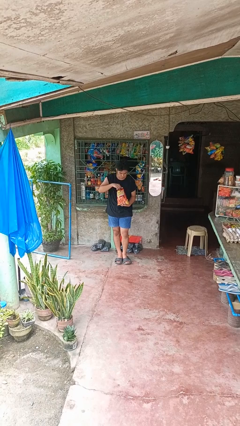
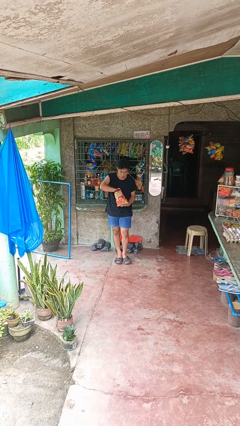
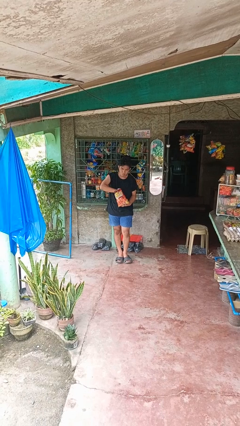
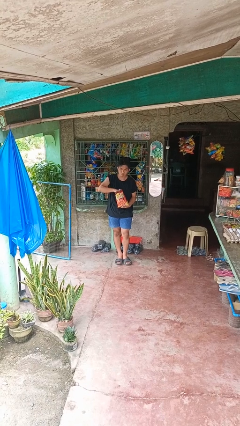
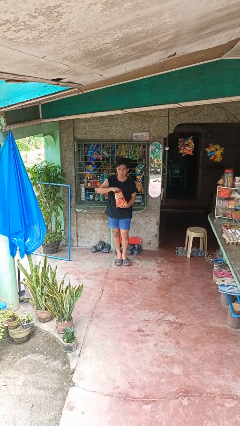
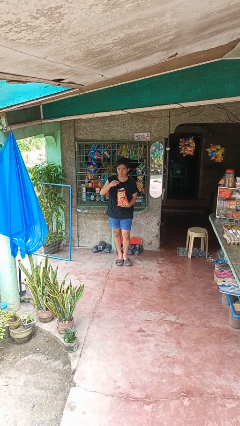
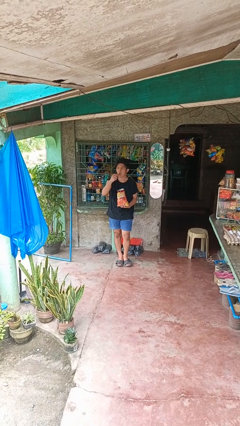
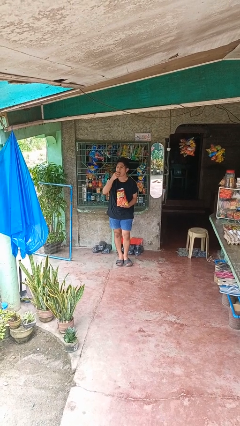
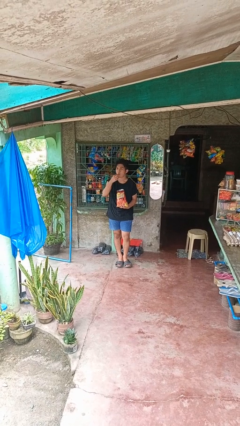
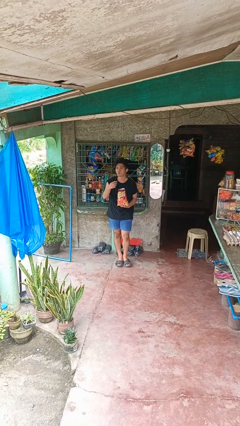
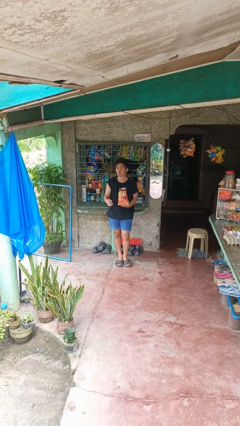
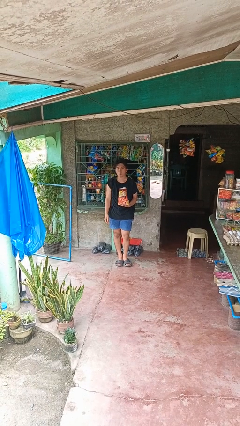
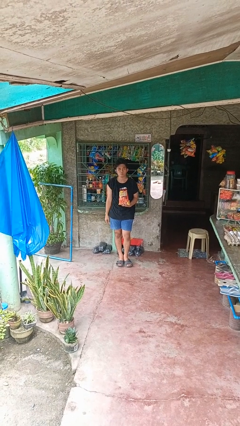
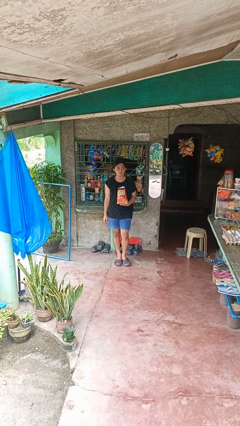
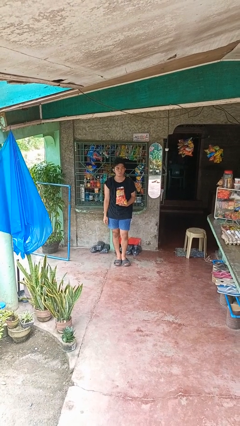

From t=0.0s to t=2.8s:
person eats snack from bag

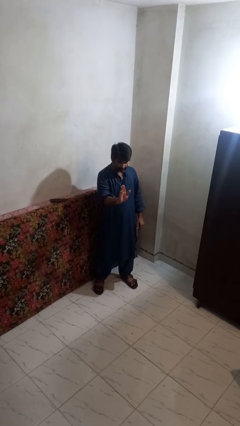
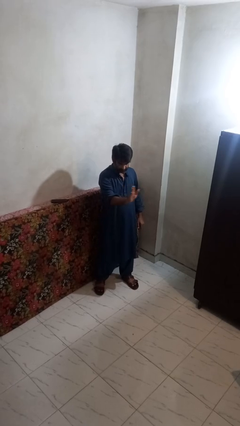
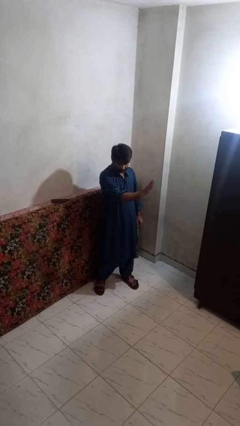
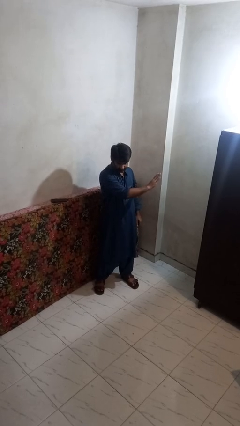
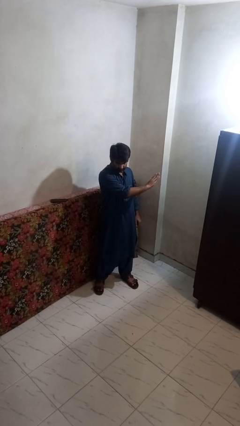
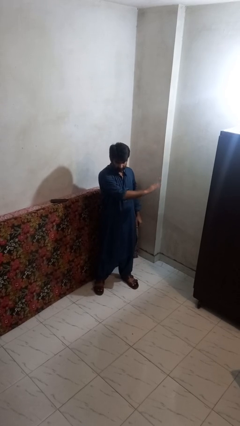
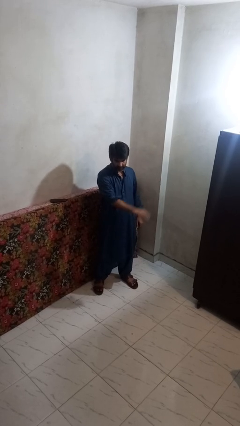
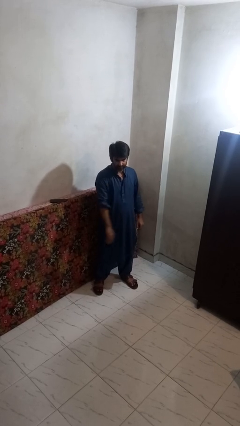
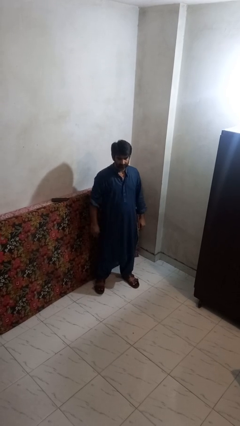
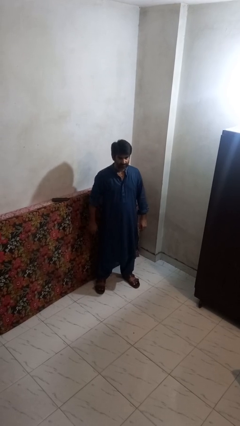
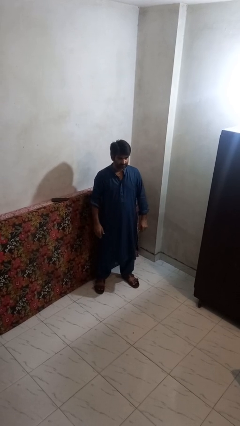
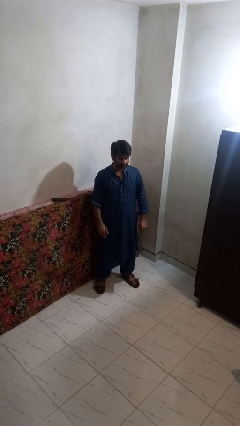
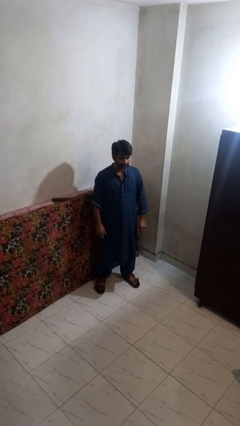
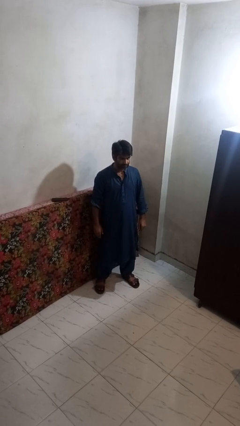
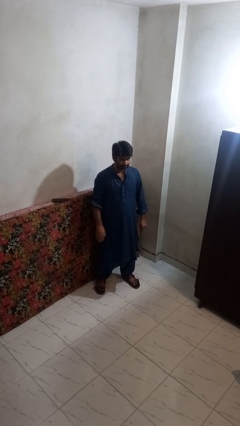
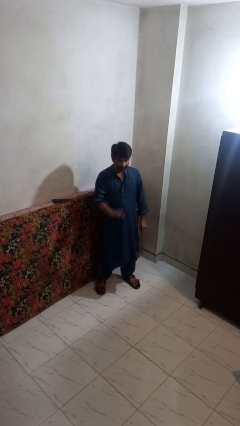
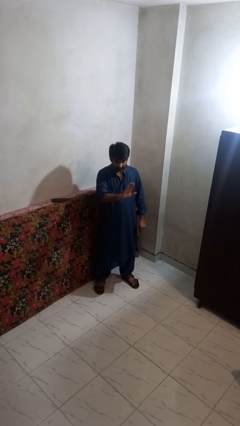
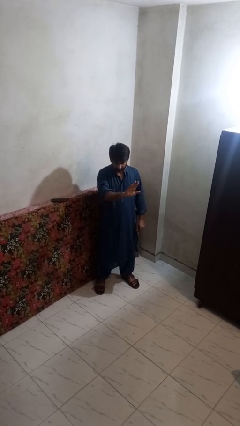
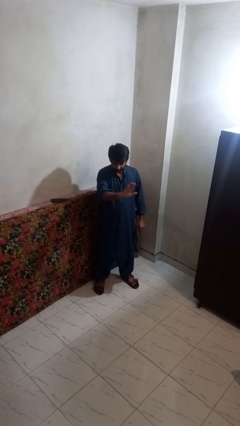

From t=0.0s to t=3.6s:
person gestures swipe left

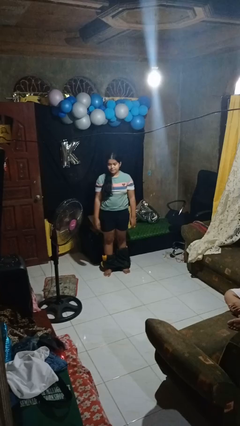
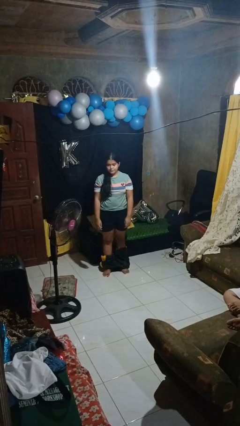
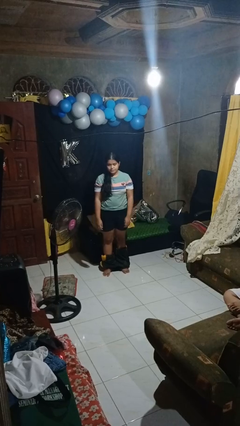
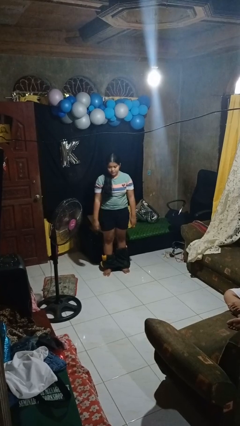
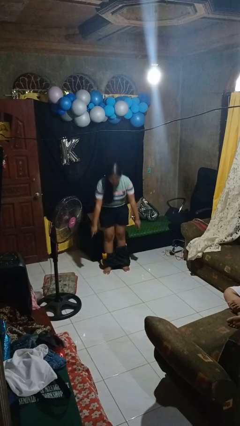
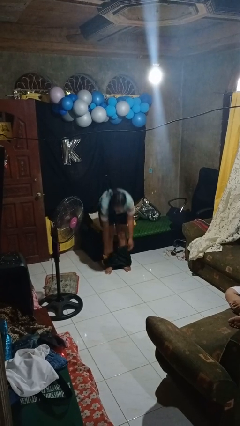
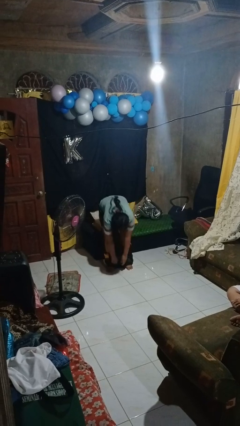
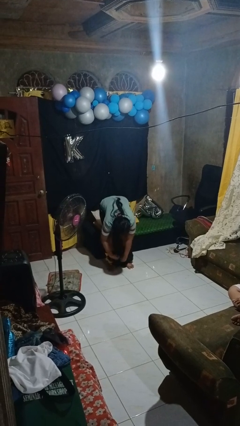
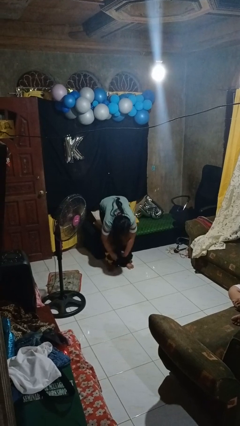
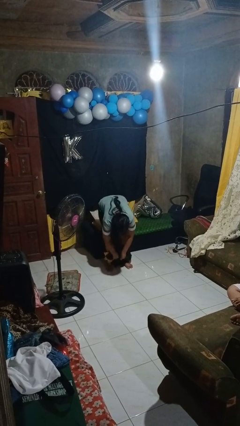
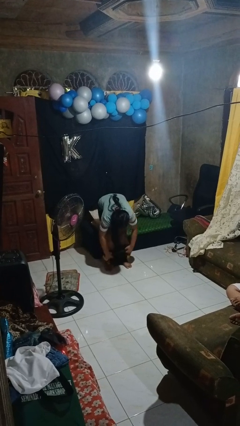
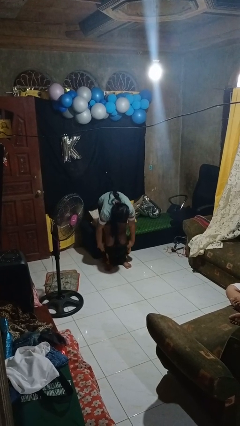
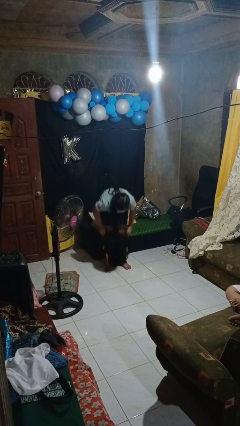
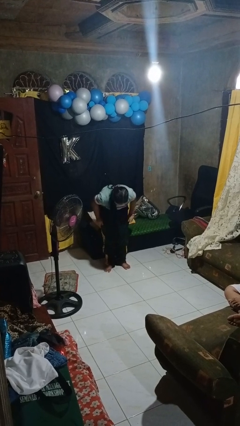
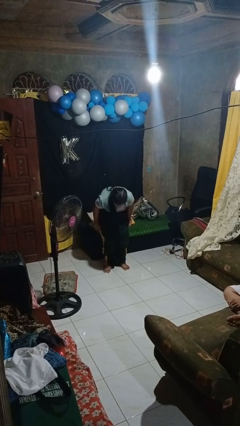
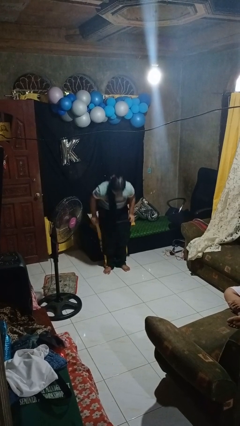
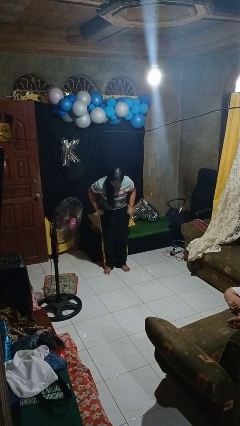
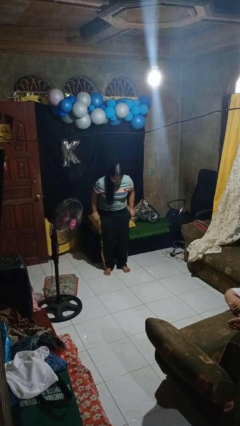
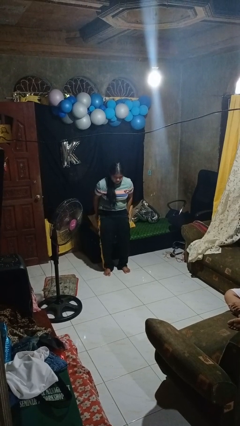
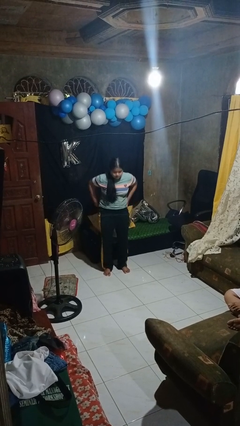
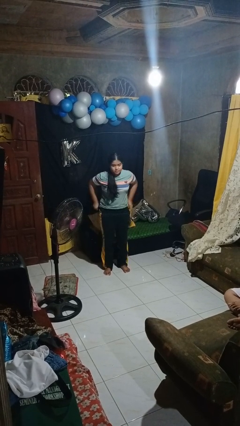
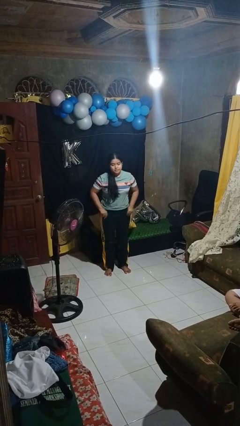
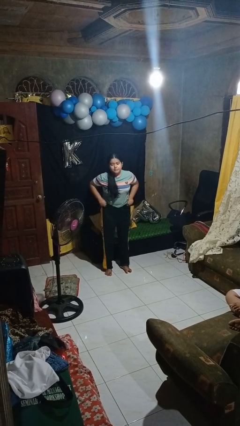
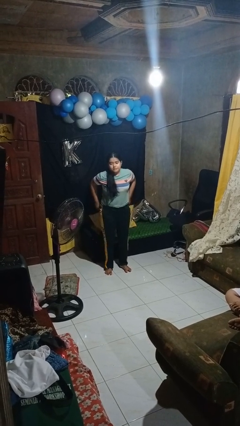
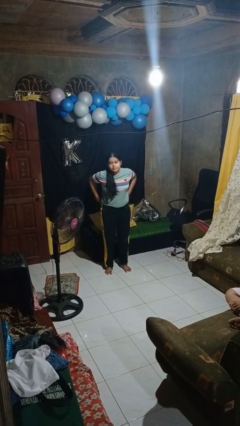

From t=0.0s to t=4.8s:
person puts on pants

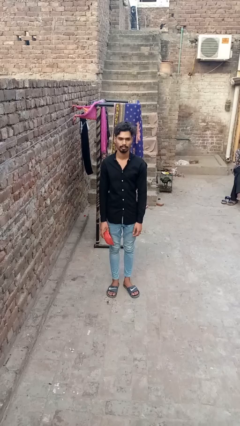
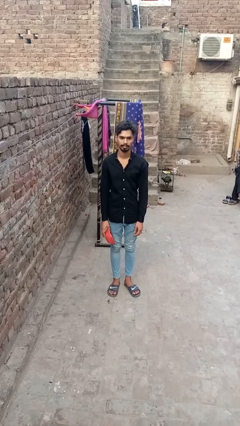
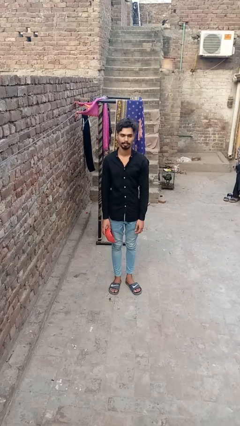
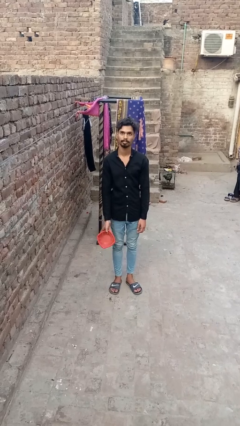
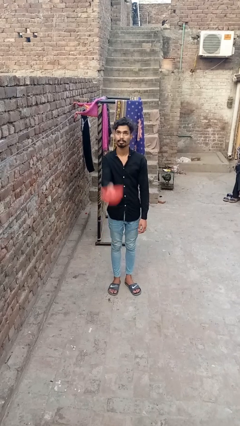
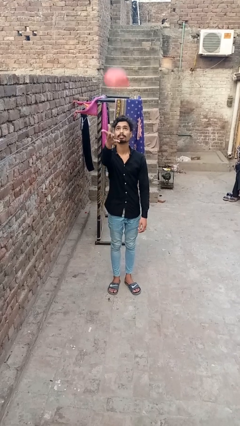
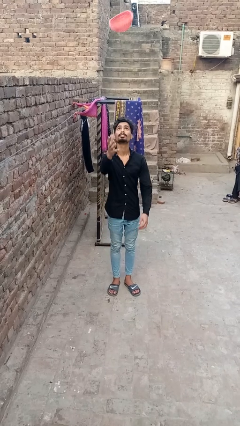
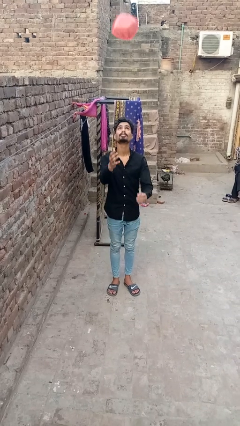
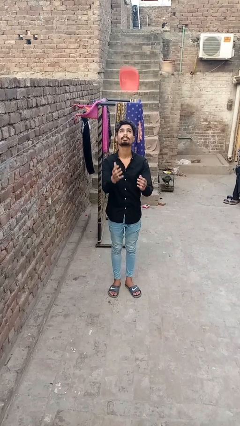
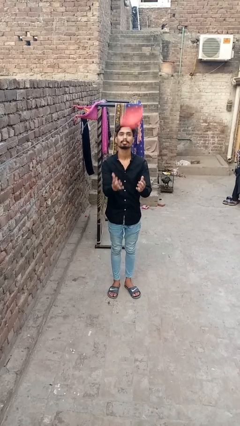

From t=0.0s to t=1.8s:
person drops object

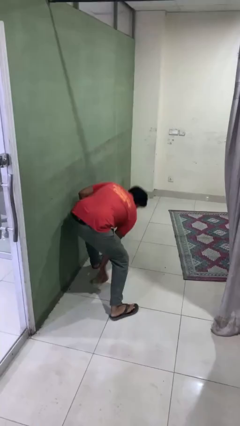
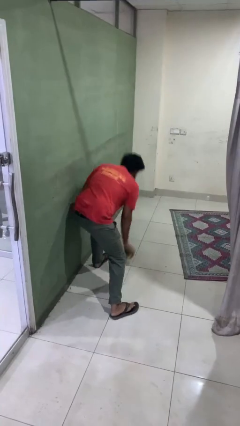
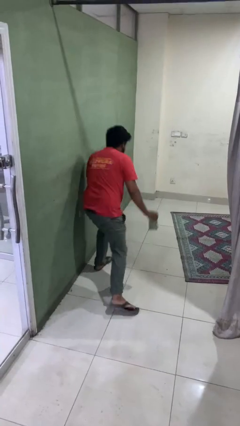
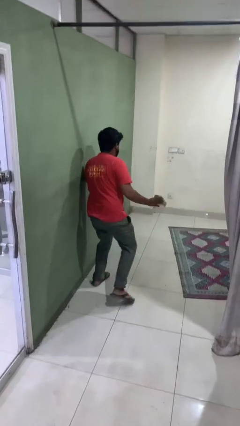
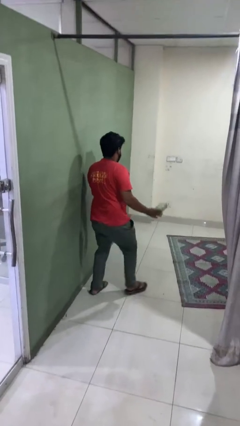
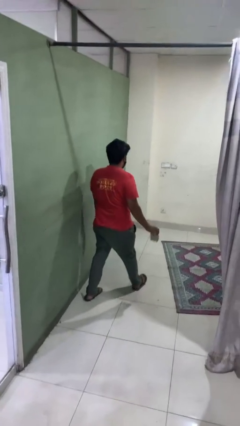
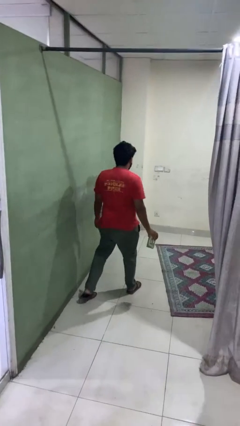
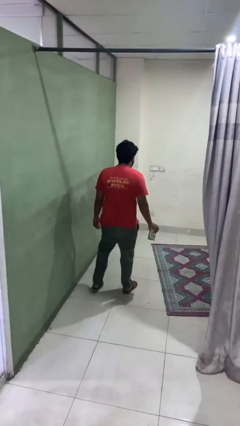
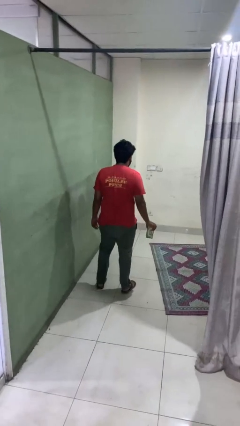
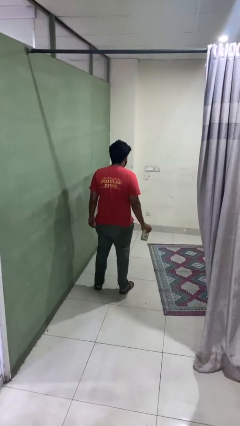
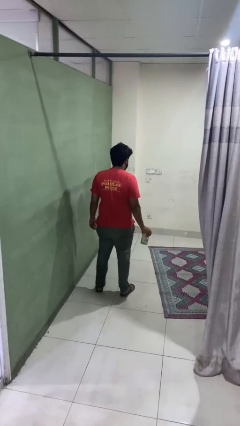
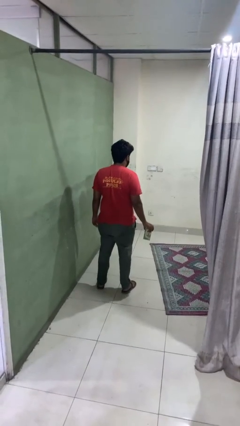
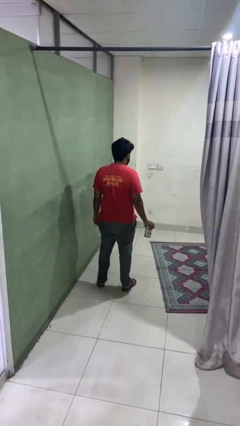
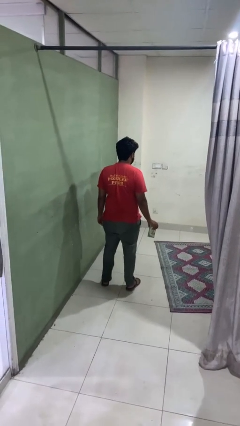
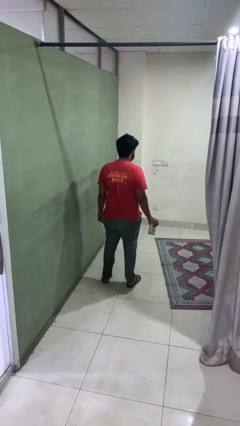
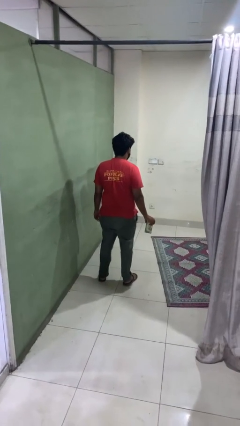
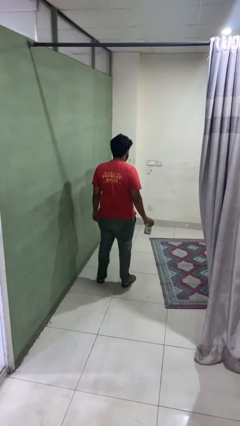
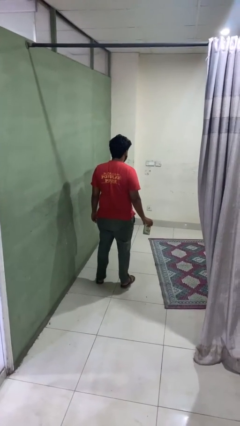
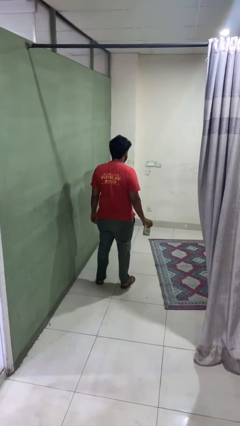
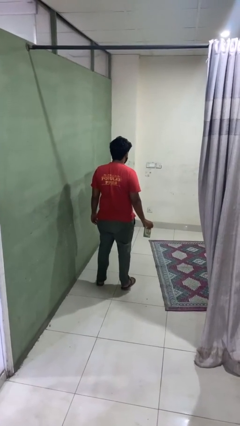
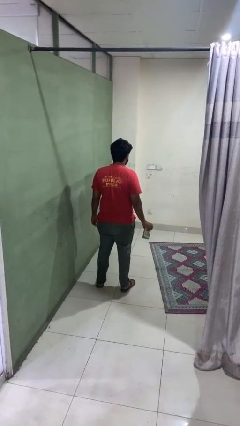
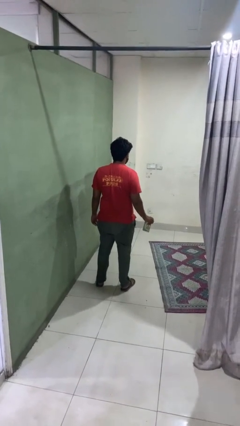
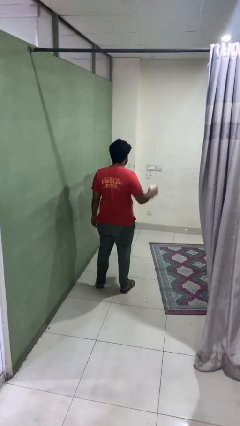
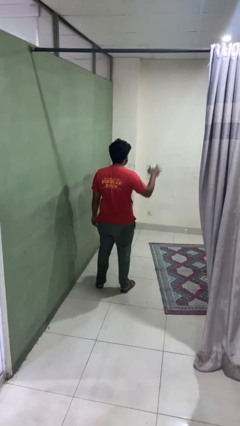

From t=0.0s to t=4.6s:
person picks up object from floor

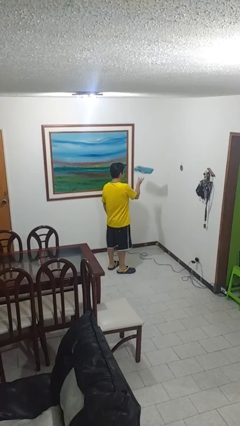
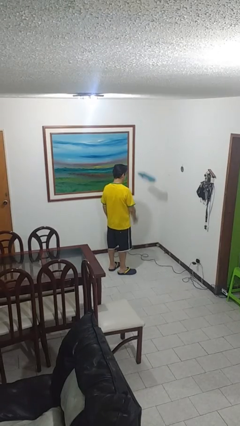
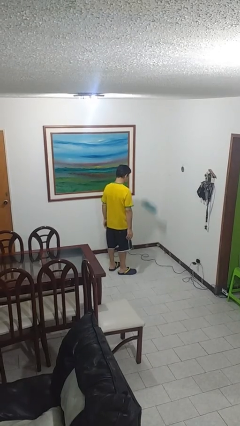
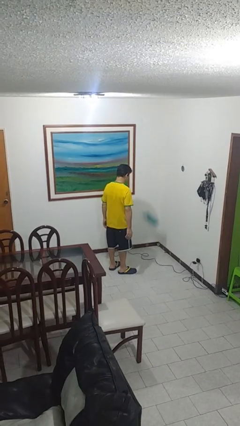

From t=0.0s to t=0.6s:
person throws object into air
